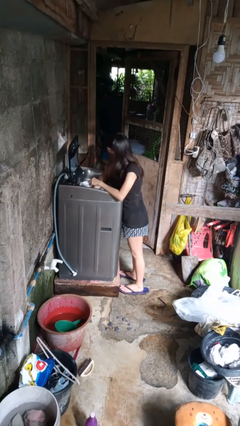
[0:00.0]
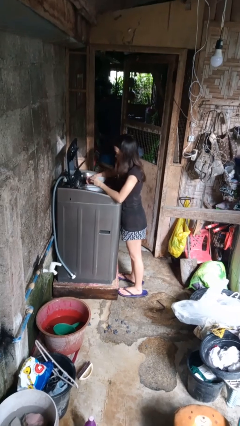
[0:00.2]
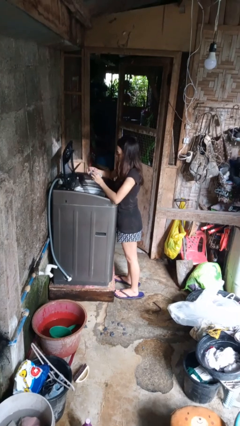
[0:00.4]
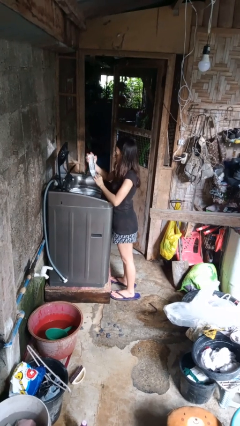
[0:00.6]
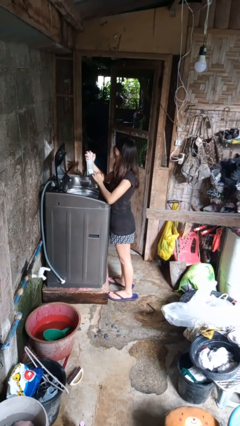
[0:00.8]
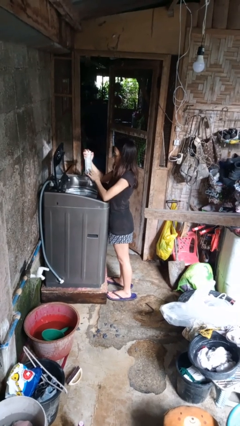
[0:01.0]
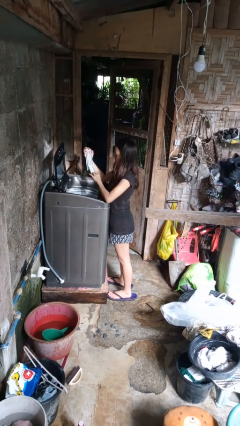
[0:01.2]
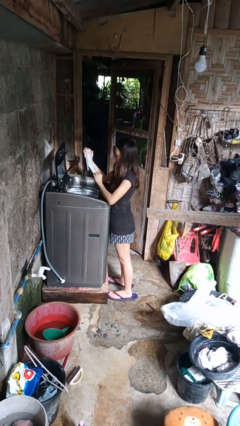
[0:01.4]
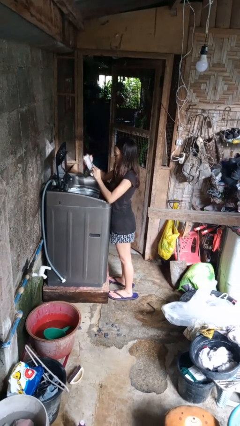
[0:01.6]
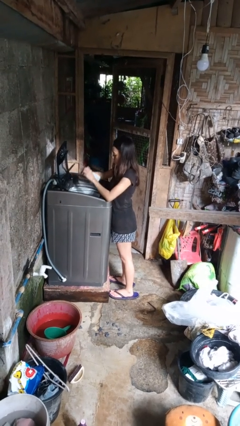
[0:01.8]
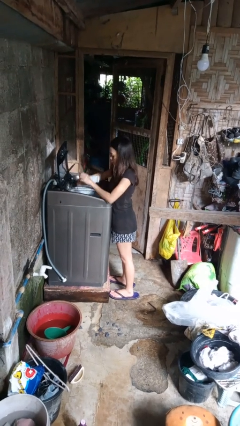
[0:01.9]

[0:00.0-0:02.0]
person cleans dryer lint trap

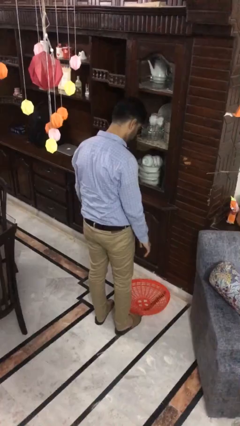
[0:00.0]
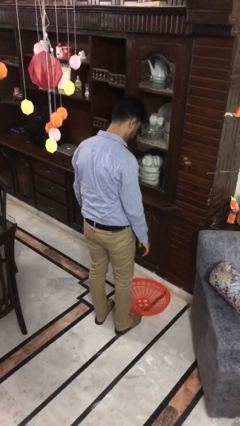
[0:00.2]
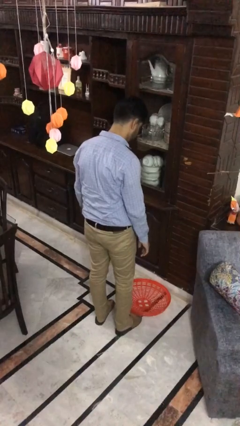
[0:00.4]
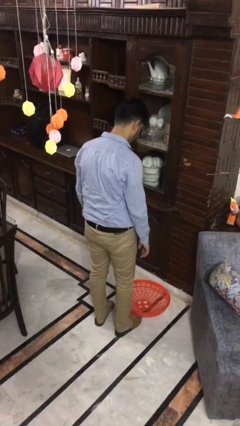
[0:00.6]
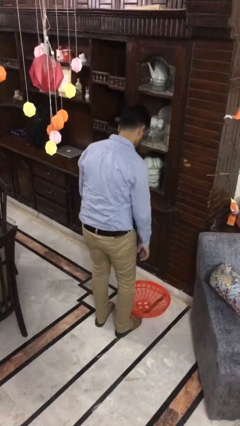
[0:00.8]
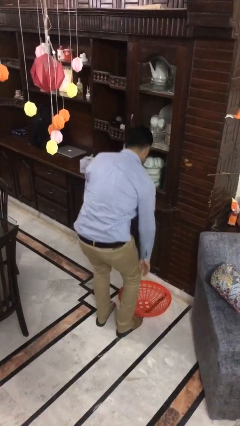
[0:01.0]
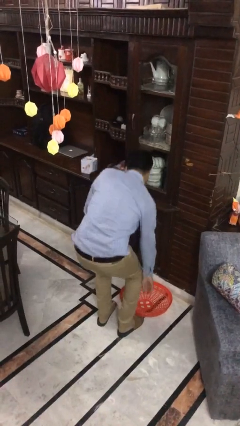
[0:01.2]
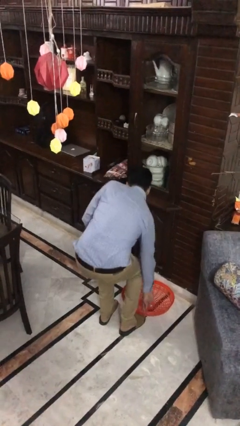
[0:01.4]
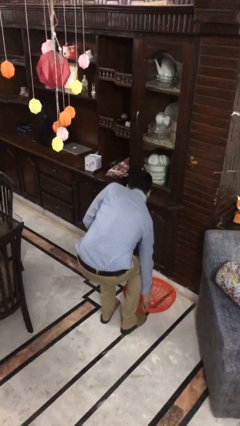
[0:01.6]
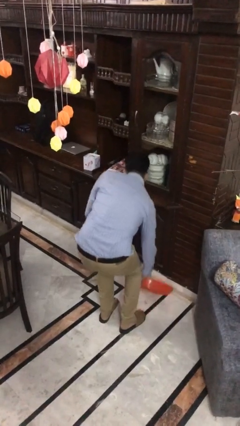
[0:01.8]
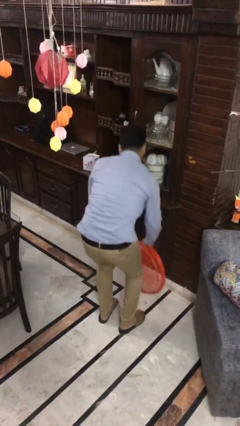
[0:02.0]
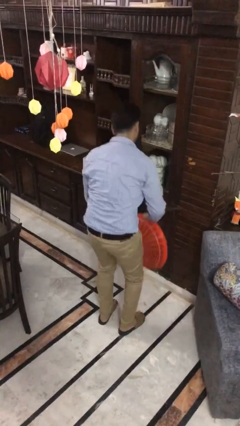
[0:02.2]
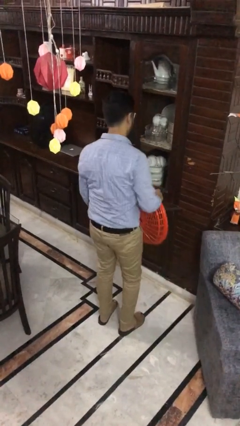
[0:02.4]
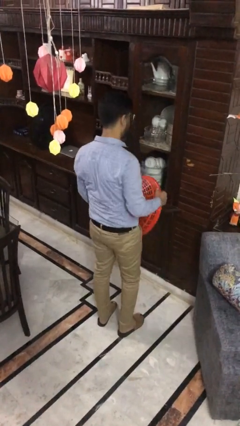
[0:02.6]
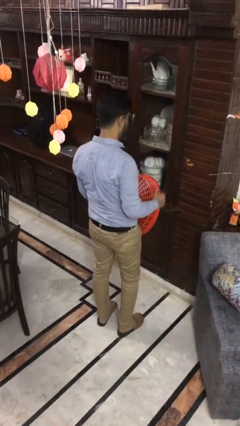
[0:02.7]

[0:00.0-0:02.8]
person picks up object from floor

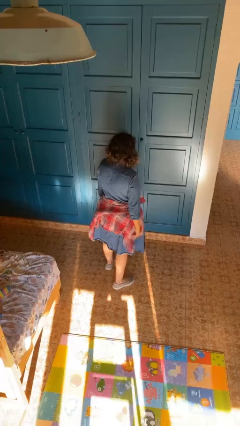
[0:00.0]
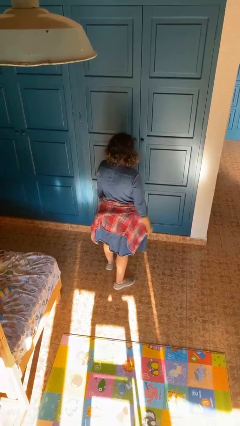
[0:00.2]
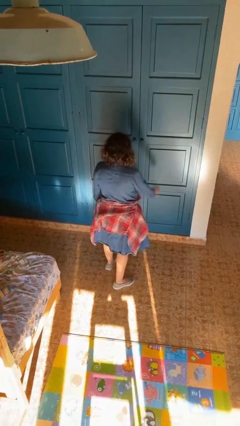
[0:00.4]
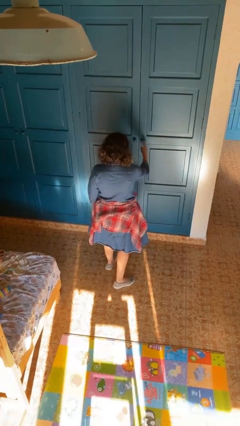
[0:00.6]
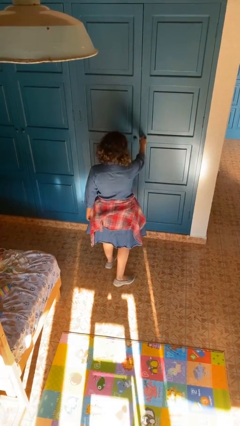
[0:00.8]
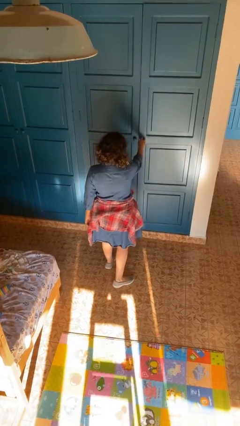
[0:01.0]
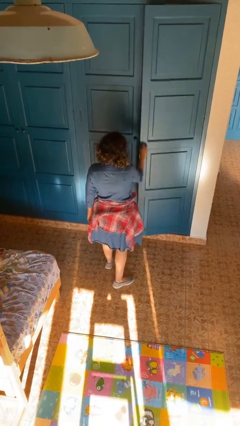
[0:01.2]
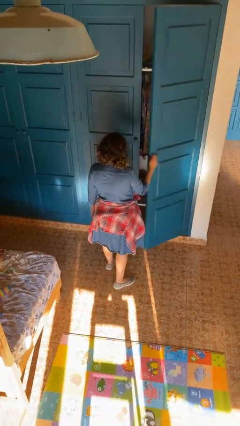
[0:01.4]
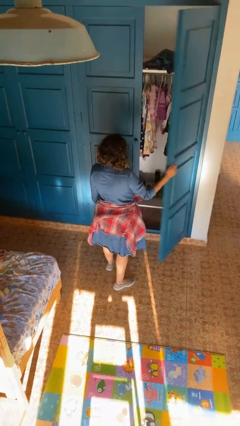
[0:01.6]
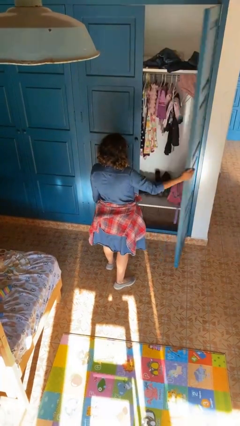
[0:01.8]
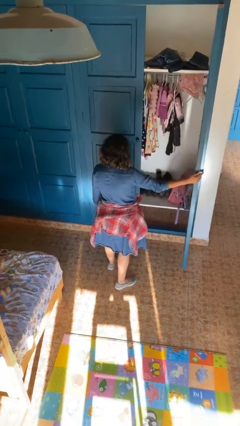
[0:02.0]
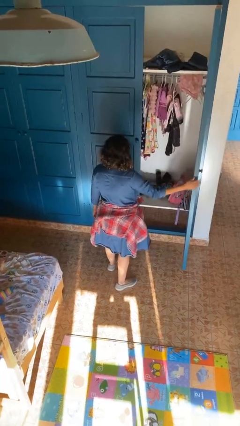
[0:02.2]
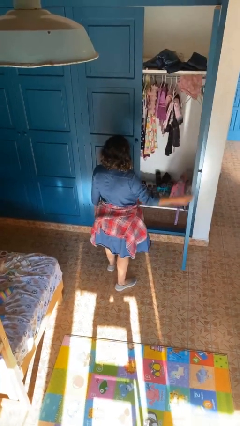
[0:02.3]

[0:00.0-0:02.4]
person opens closet door

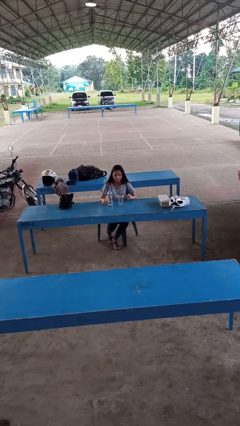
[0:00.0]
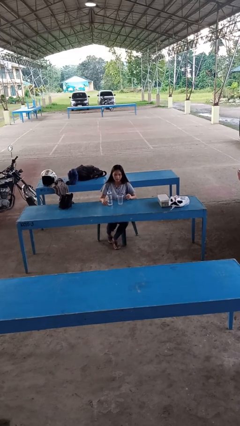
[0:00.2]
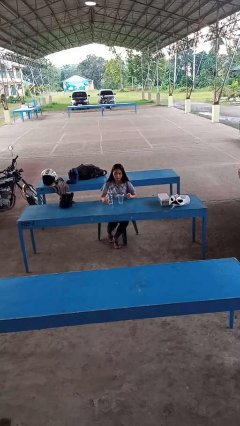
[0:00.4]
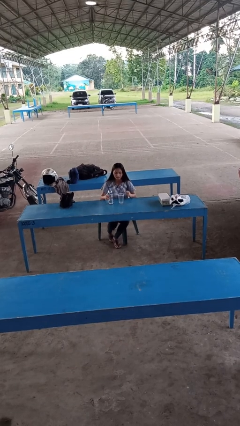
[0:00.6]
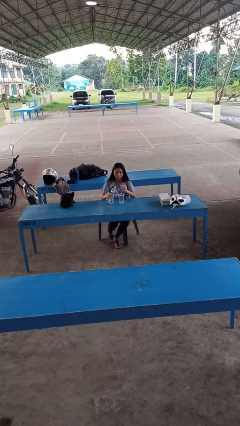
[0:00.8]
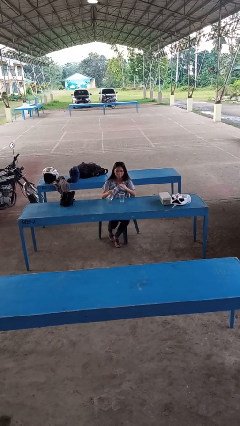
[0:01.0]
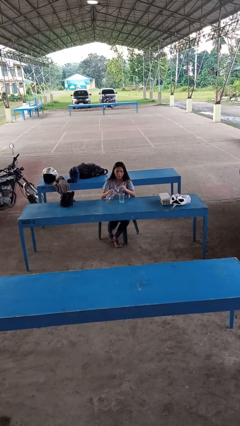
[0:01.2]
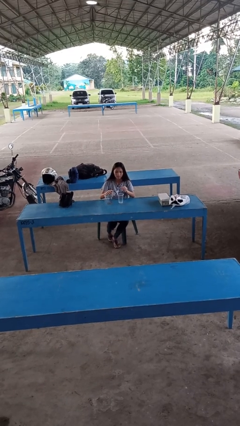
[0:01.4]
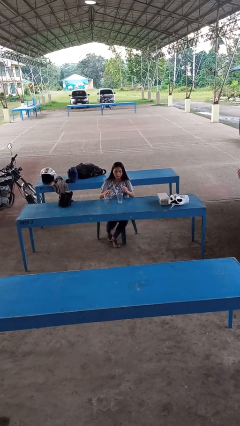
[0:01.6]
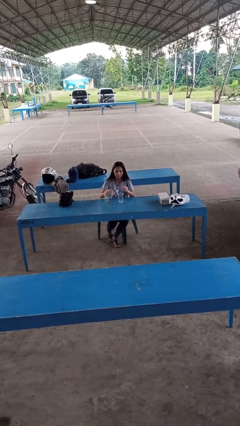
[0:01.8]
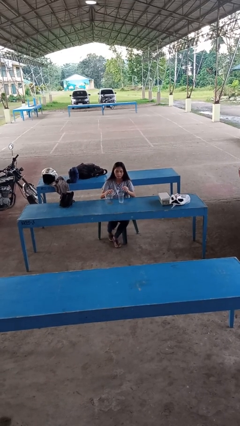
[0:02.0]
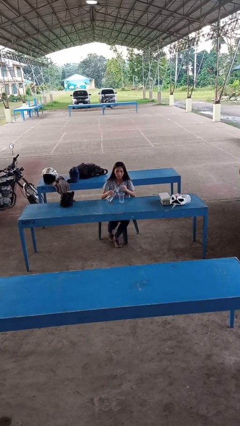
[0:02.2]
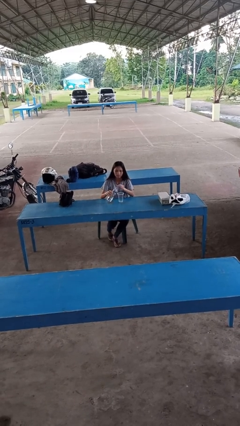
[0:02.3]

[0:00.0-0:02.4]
person pours liquid into cup

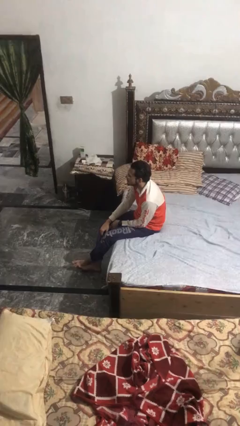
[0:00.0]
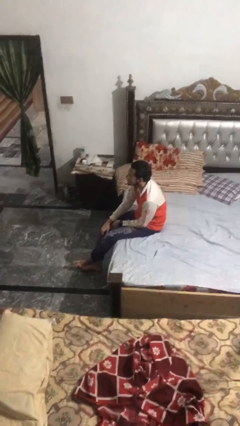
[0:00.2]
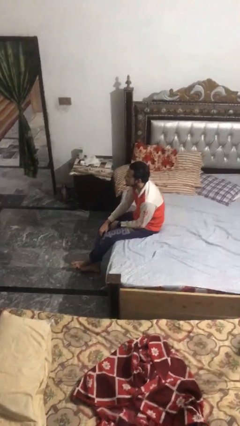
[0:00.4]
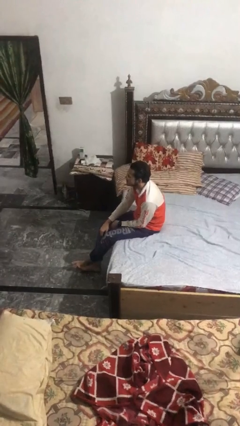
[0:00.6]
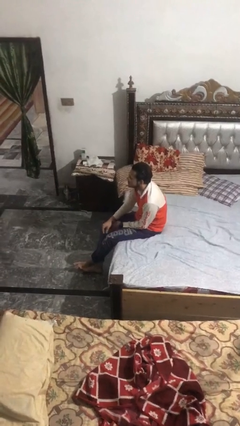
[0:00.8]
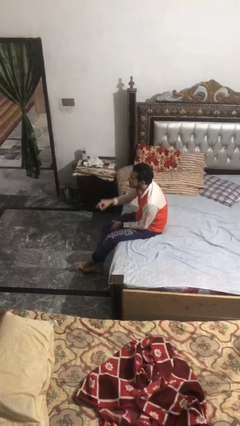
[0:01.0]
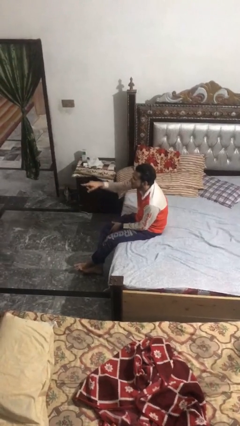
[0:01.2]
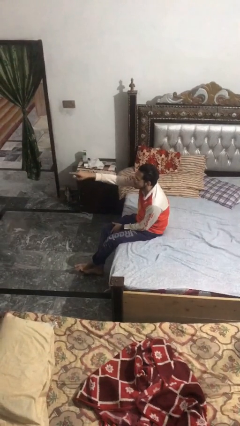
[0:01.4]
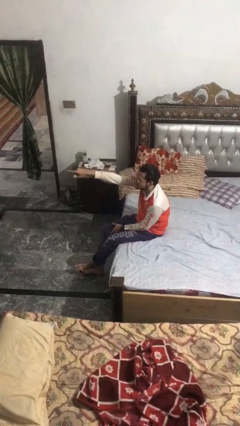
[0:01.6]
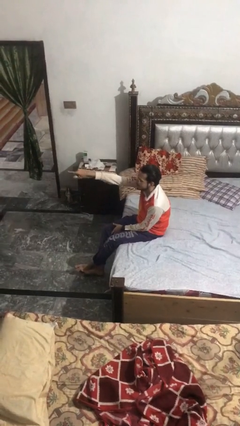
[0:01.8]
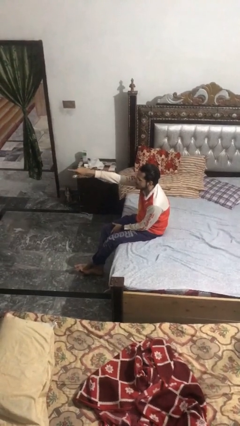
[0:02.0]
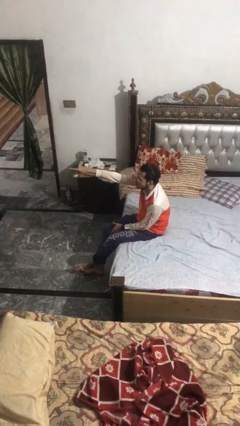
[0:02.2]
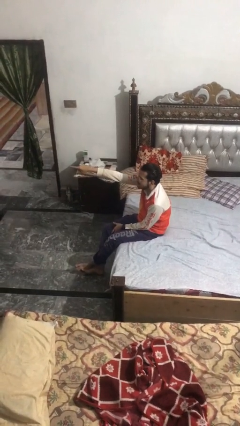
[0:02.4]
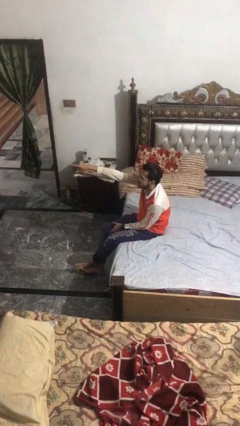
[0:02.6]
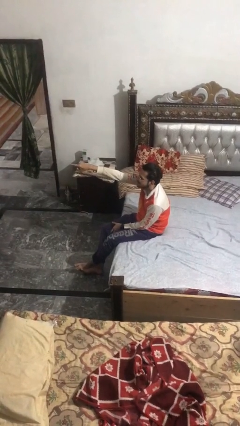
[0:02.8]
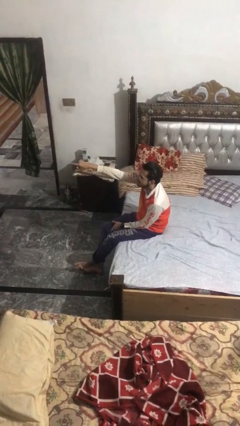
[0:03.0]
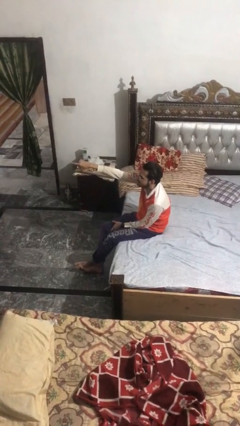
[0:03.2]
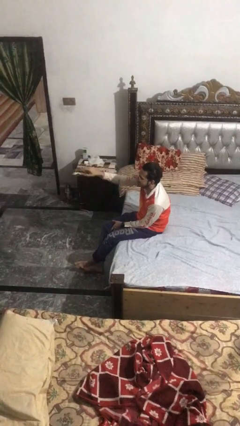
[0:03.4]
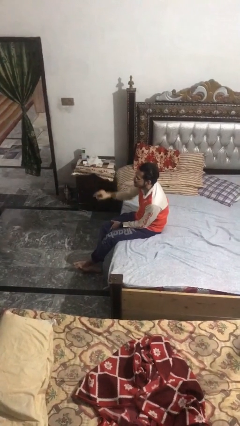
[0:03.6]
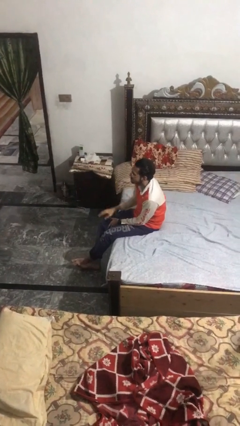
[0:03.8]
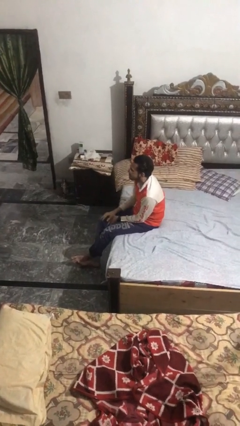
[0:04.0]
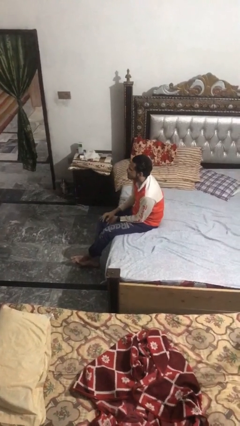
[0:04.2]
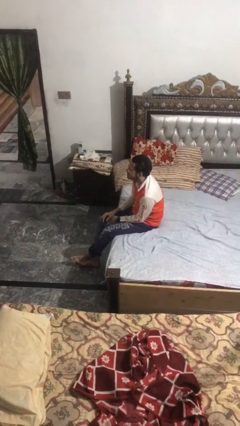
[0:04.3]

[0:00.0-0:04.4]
person points at person

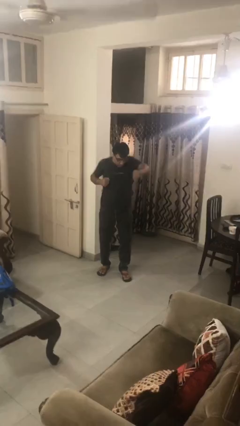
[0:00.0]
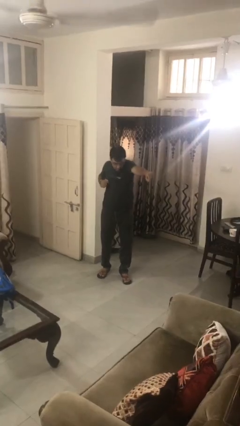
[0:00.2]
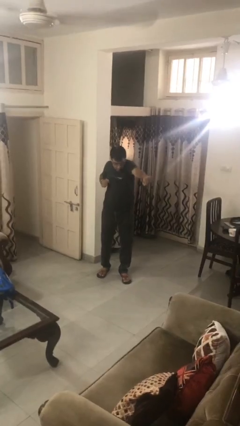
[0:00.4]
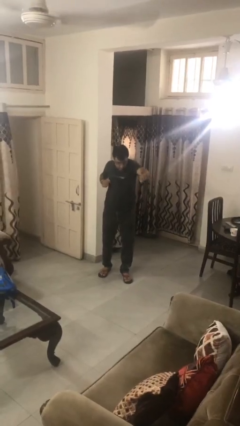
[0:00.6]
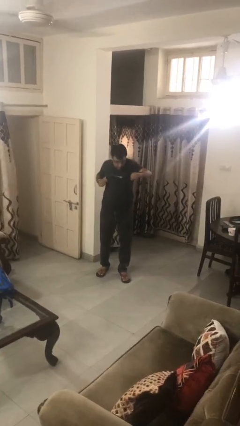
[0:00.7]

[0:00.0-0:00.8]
person punches

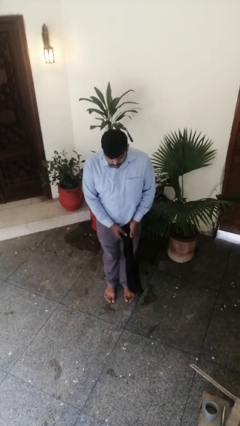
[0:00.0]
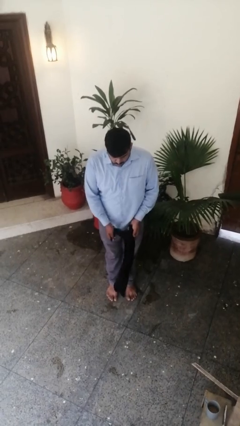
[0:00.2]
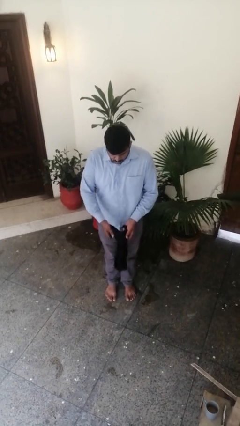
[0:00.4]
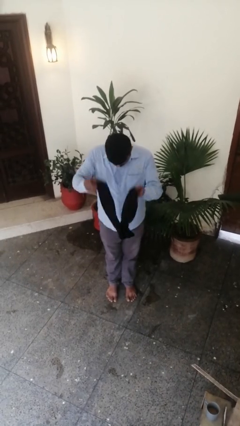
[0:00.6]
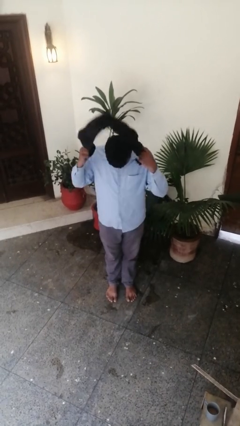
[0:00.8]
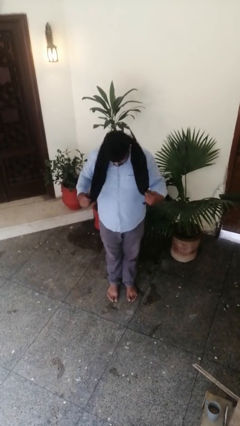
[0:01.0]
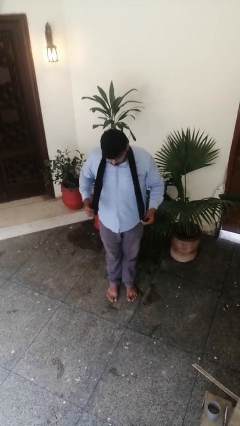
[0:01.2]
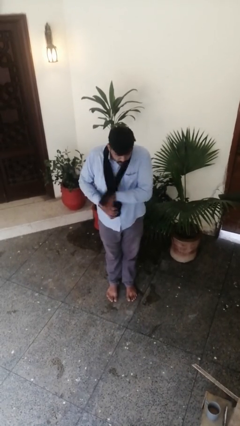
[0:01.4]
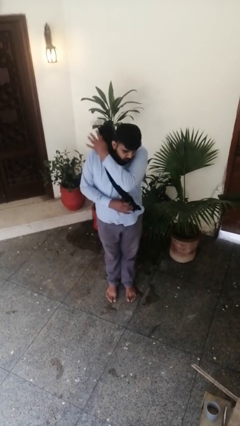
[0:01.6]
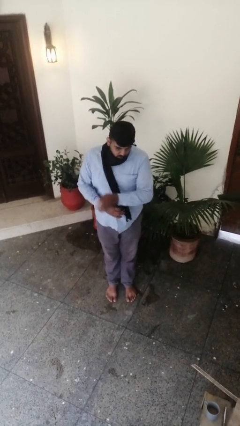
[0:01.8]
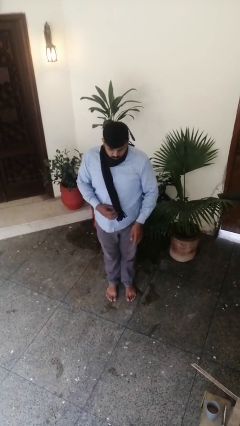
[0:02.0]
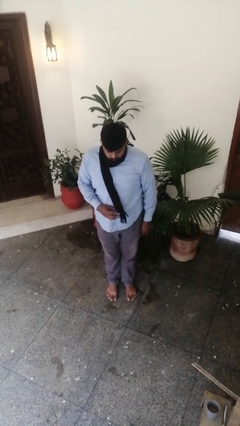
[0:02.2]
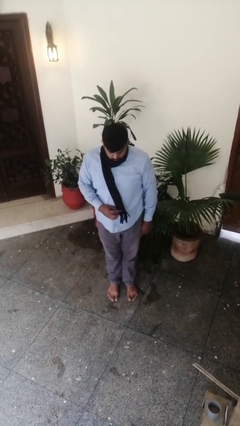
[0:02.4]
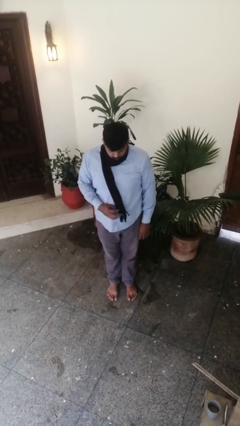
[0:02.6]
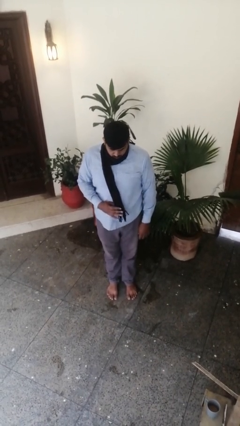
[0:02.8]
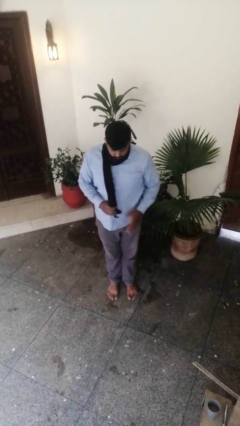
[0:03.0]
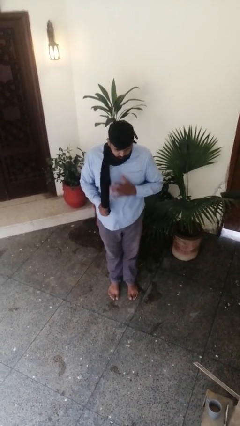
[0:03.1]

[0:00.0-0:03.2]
person puts on scarf
